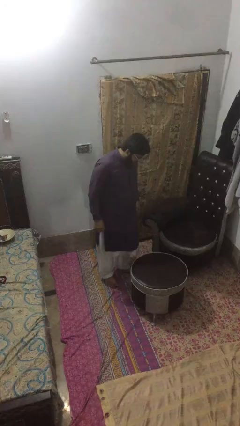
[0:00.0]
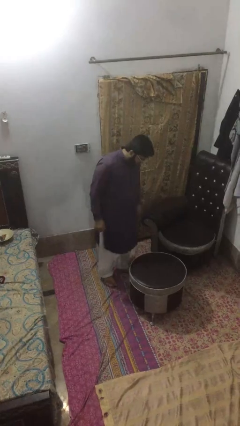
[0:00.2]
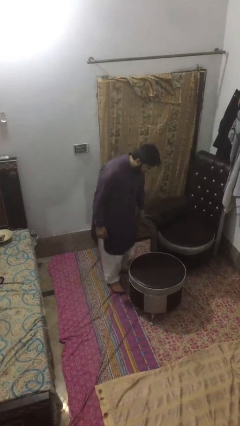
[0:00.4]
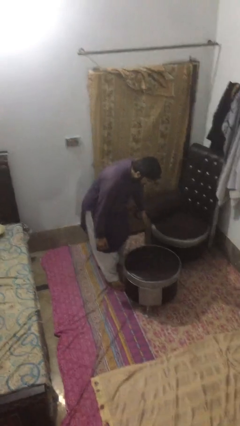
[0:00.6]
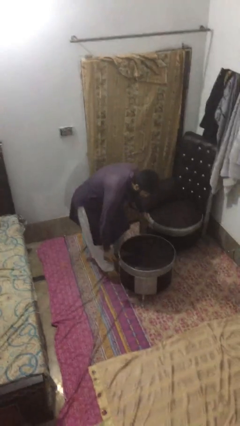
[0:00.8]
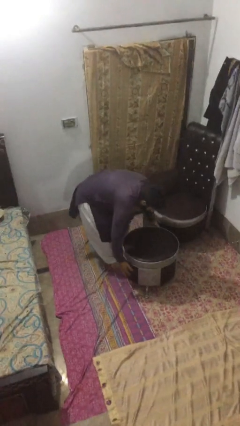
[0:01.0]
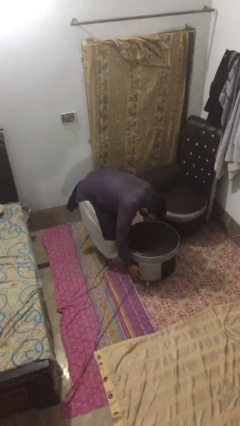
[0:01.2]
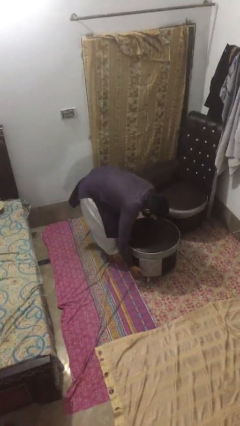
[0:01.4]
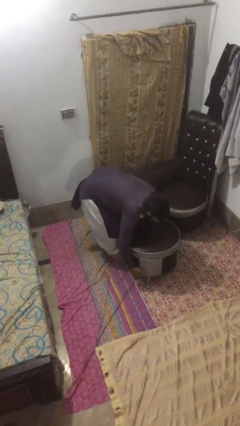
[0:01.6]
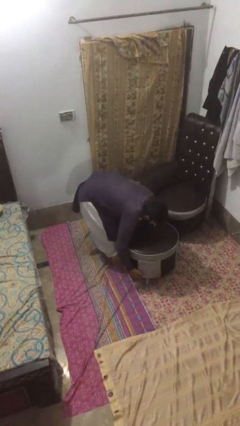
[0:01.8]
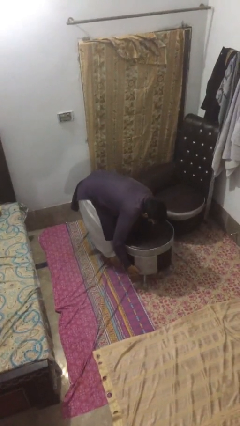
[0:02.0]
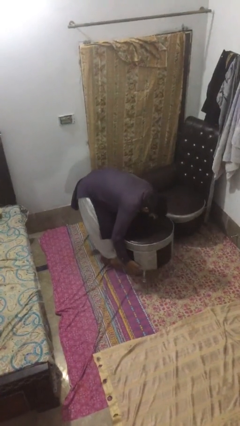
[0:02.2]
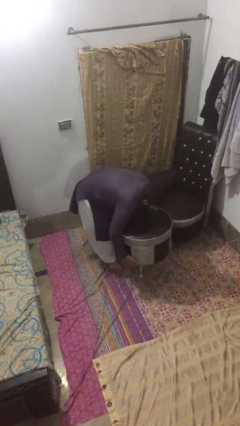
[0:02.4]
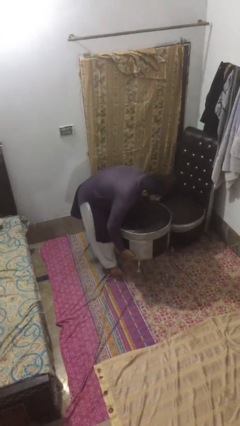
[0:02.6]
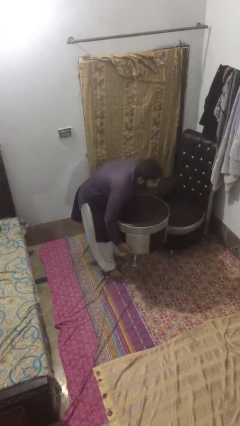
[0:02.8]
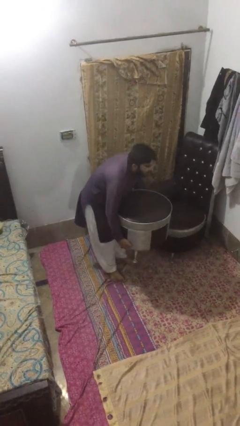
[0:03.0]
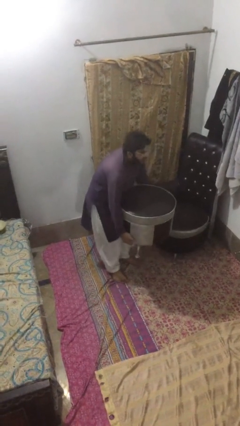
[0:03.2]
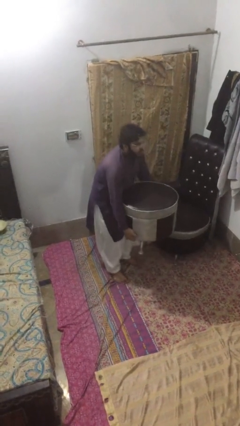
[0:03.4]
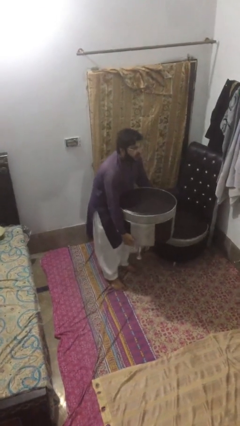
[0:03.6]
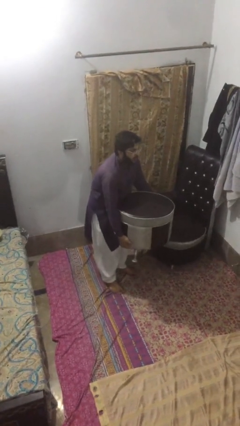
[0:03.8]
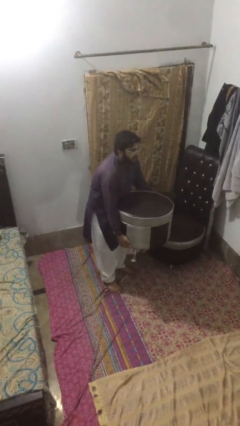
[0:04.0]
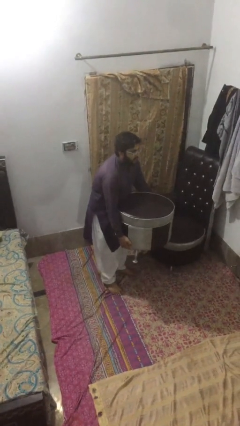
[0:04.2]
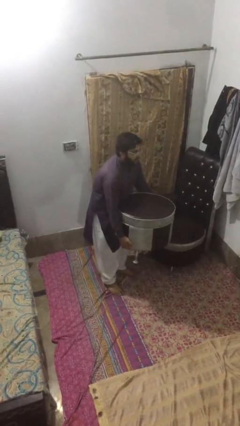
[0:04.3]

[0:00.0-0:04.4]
person picks up object from floor

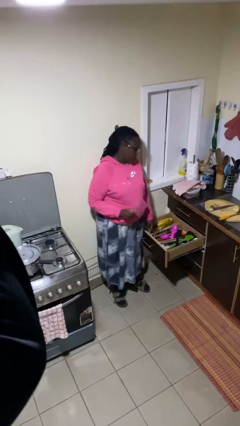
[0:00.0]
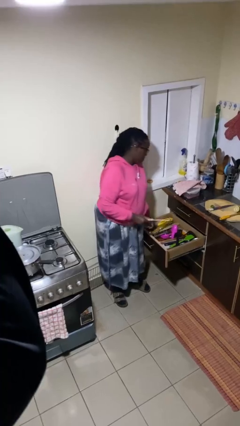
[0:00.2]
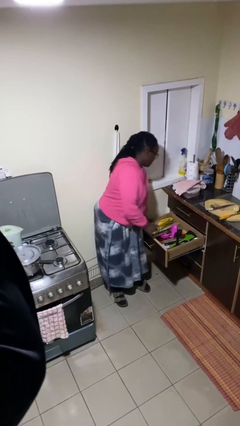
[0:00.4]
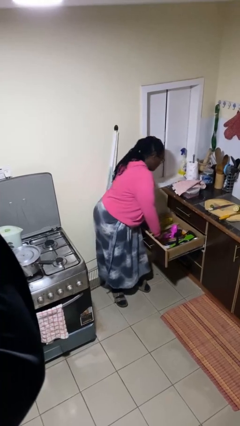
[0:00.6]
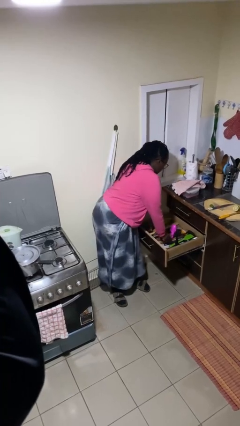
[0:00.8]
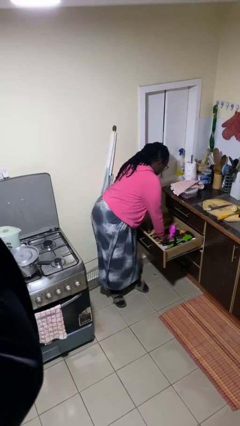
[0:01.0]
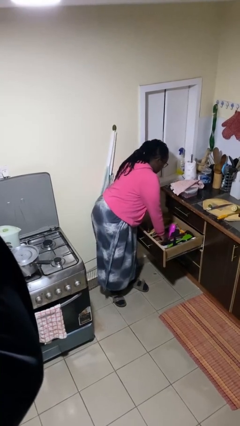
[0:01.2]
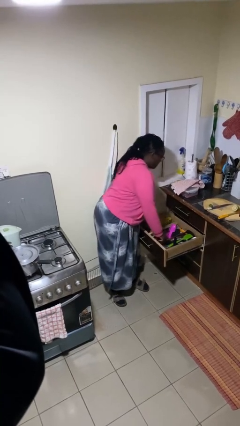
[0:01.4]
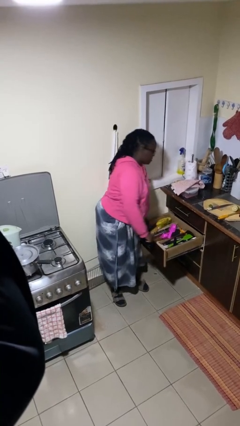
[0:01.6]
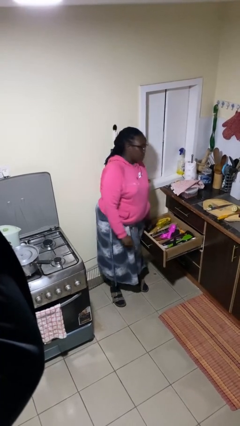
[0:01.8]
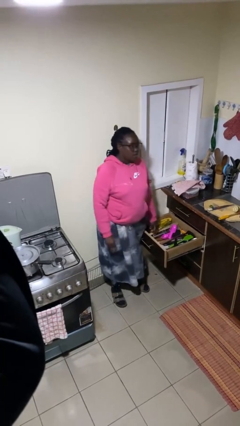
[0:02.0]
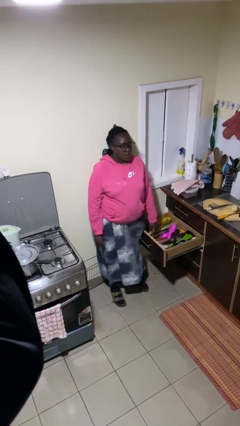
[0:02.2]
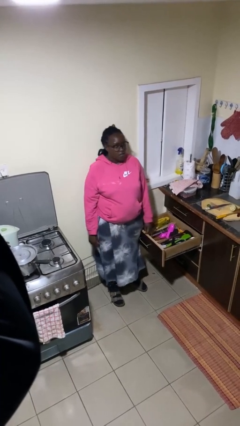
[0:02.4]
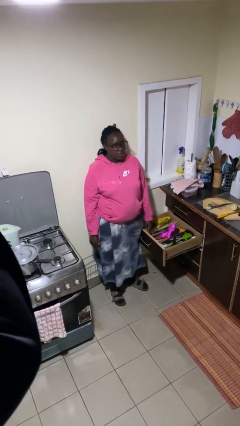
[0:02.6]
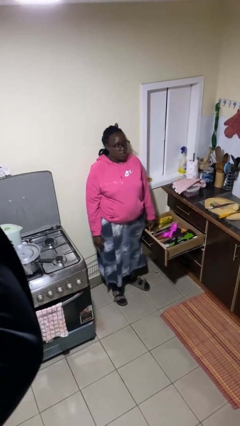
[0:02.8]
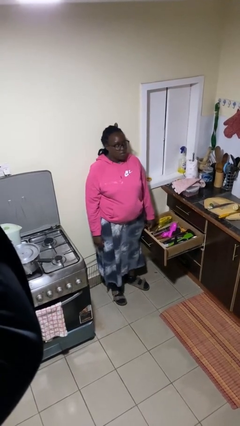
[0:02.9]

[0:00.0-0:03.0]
person puts object into kitchen drawer

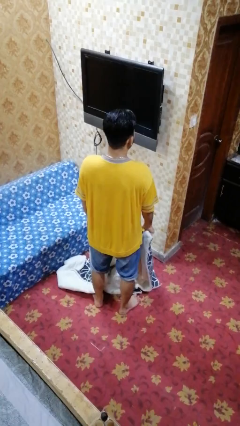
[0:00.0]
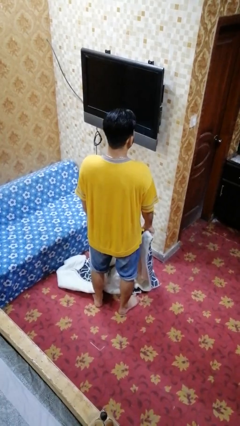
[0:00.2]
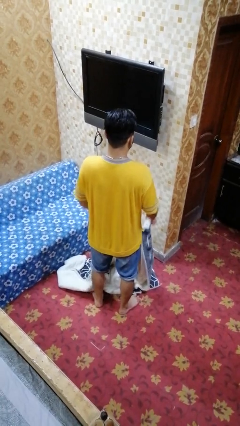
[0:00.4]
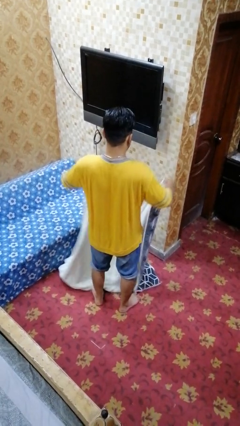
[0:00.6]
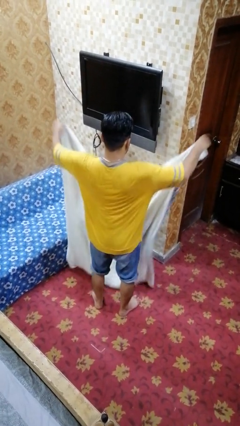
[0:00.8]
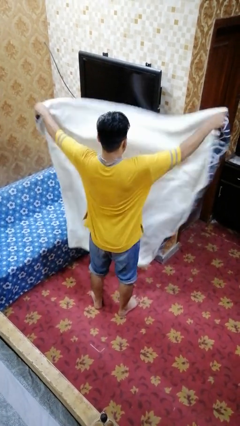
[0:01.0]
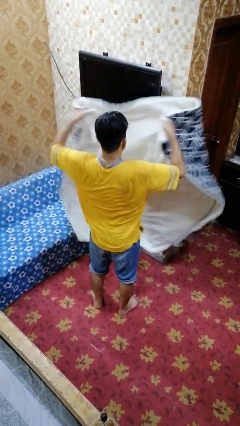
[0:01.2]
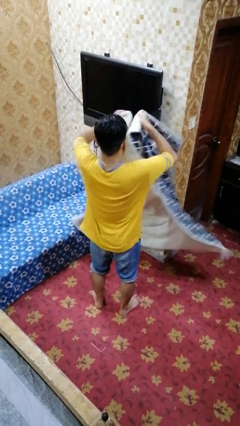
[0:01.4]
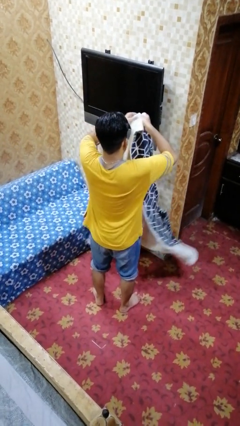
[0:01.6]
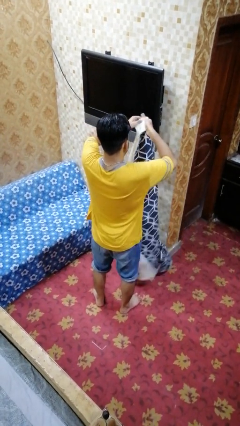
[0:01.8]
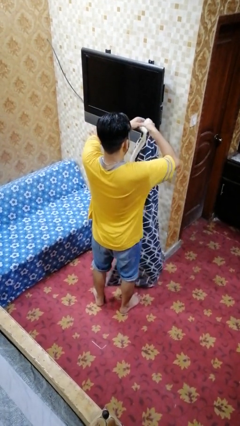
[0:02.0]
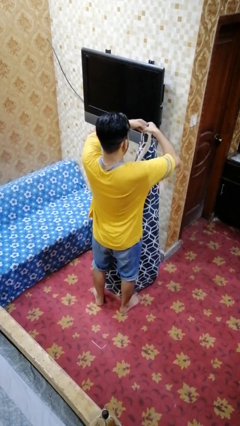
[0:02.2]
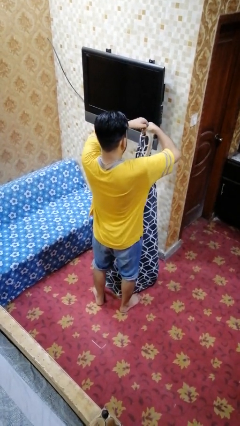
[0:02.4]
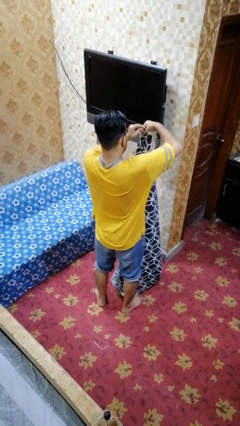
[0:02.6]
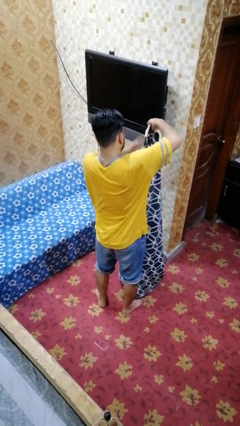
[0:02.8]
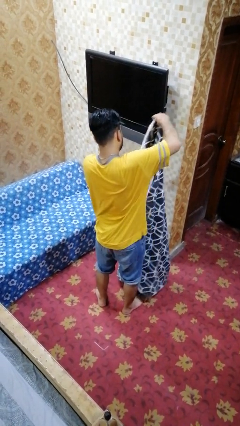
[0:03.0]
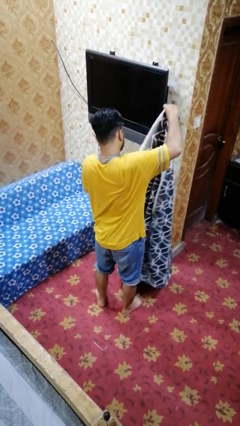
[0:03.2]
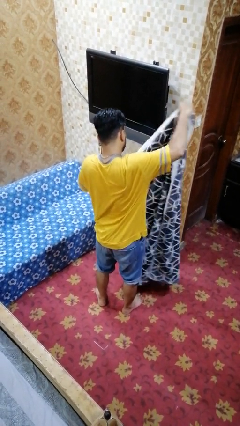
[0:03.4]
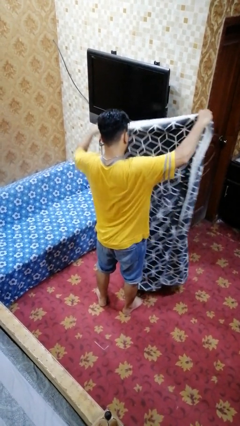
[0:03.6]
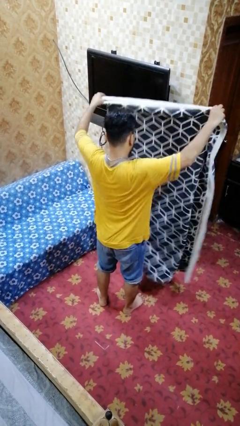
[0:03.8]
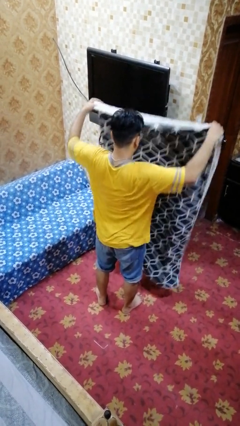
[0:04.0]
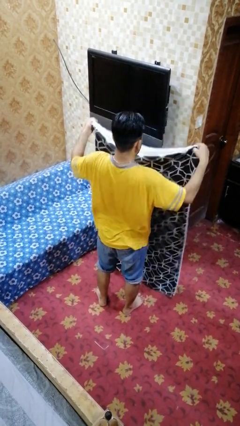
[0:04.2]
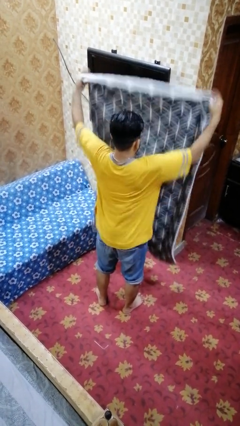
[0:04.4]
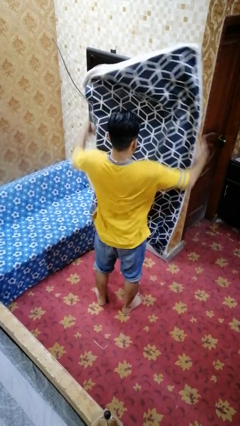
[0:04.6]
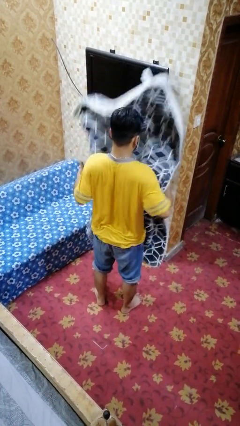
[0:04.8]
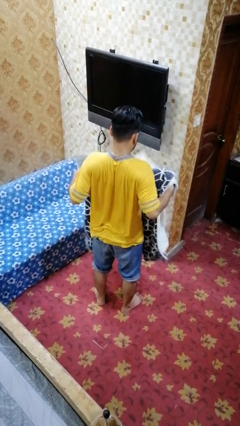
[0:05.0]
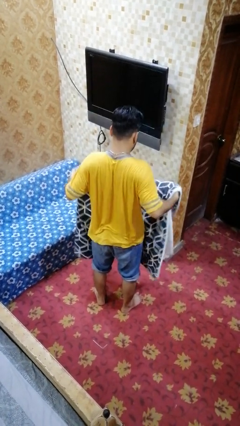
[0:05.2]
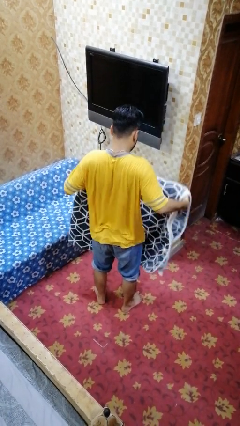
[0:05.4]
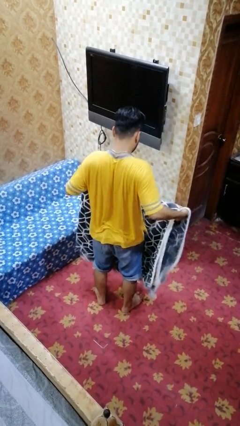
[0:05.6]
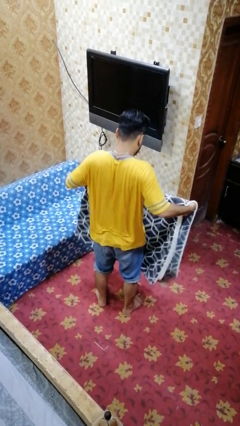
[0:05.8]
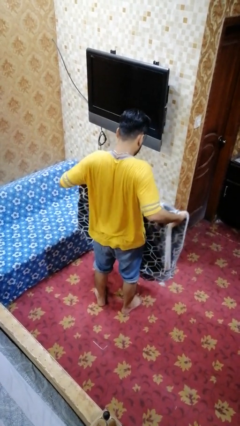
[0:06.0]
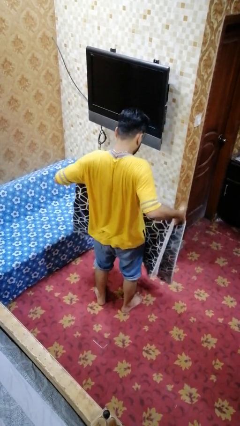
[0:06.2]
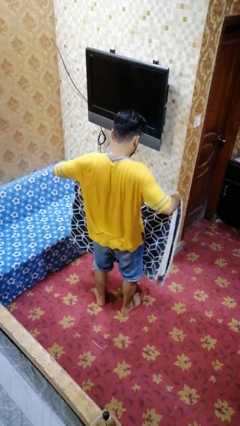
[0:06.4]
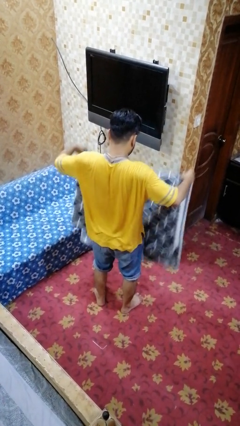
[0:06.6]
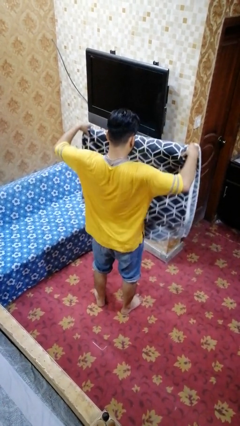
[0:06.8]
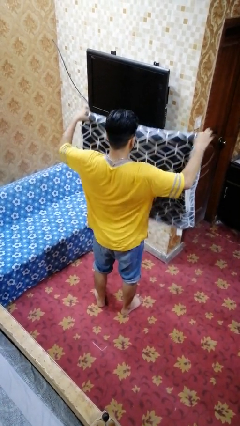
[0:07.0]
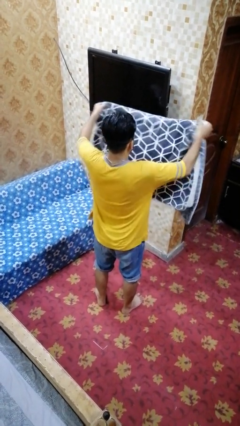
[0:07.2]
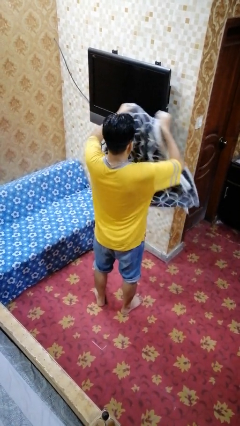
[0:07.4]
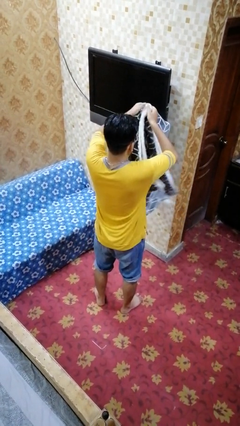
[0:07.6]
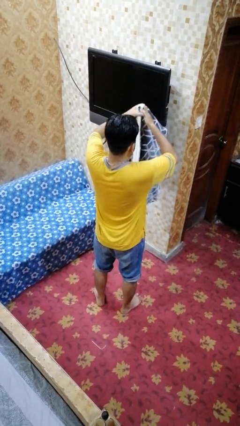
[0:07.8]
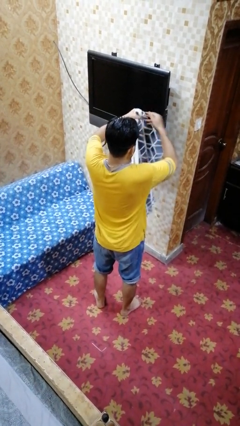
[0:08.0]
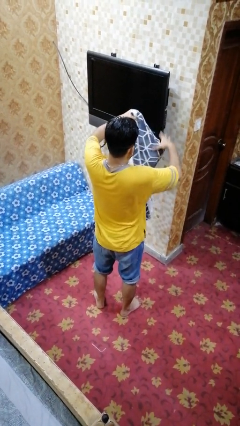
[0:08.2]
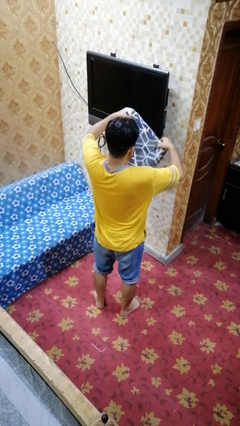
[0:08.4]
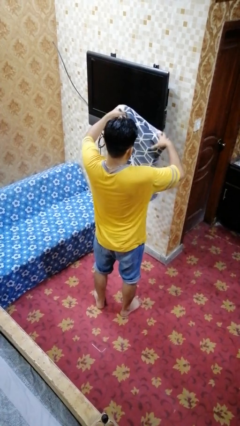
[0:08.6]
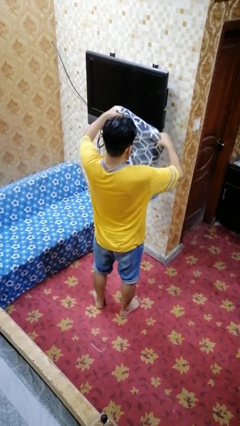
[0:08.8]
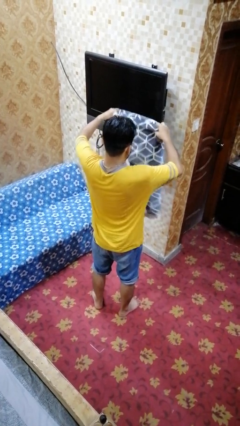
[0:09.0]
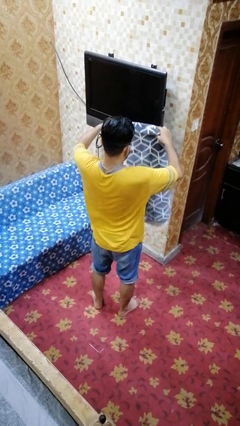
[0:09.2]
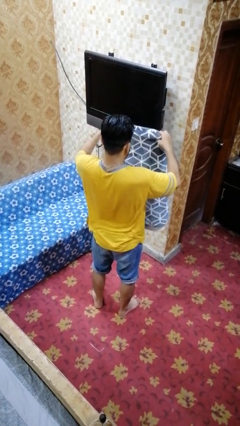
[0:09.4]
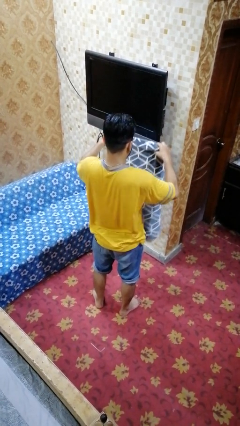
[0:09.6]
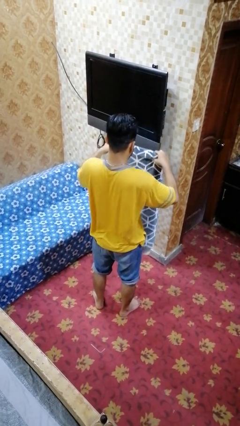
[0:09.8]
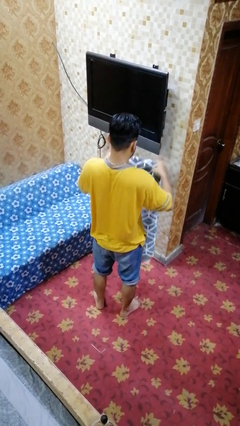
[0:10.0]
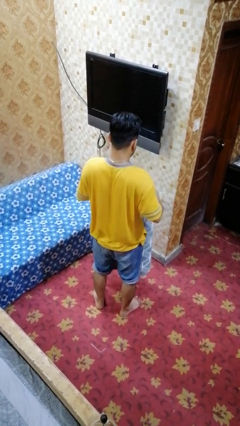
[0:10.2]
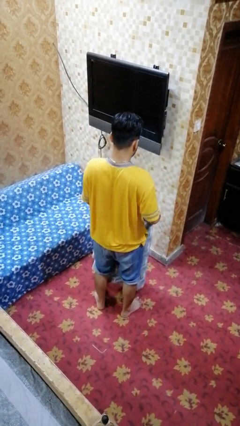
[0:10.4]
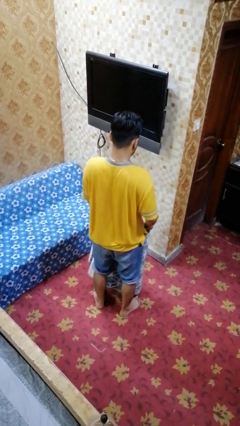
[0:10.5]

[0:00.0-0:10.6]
person folds blanket
